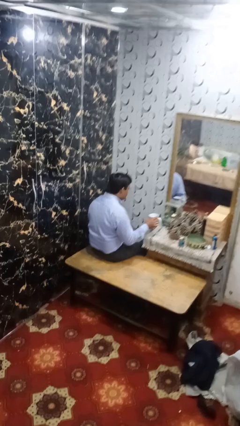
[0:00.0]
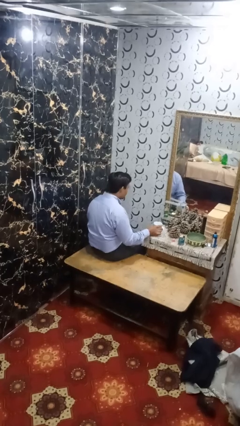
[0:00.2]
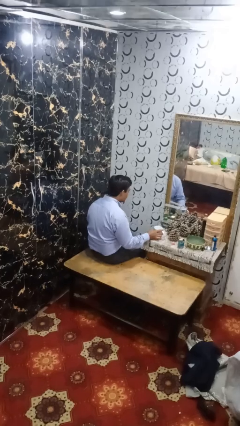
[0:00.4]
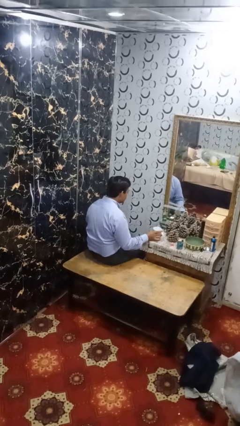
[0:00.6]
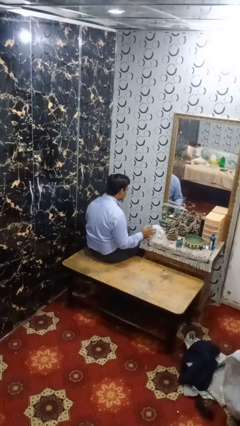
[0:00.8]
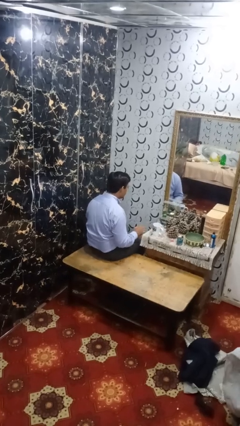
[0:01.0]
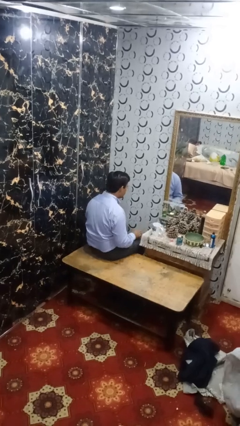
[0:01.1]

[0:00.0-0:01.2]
person puts down object on table

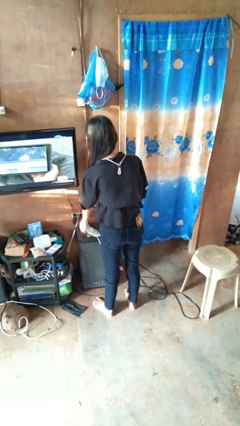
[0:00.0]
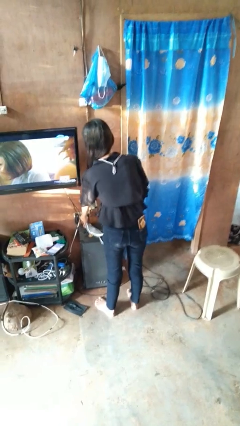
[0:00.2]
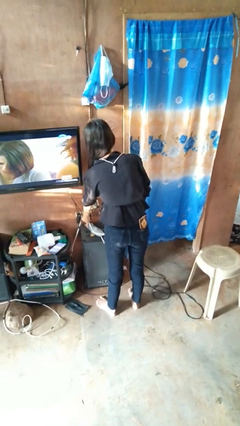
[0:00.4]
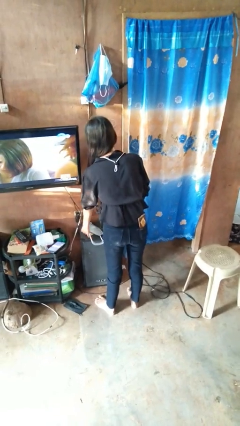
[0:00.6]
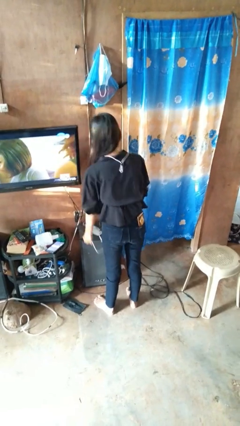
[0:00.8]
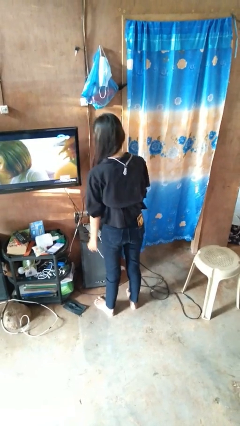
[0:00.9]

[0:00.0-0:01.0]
person unplugs from electrical socket

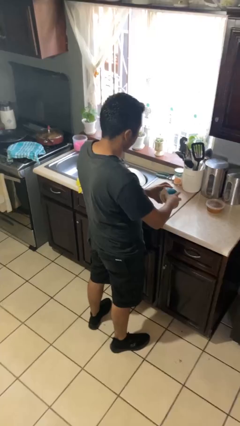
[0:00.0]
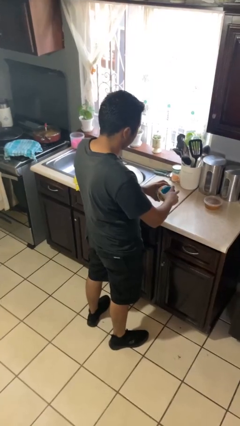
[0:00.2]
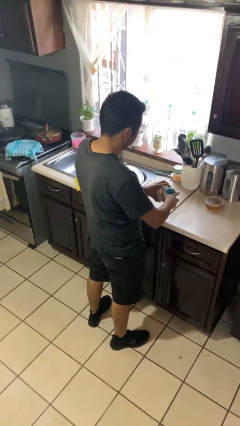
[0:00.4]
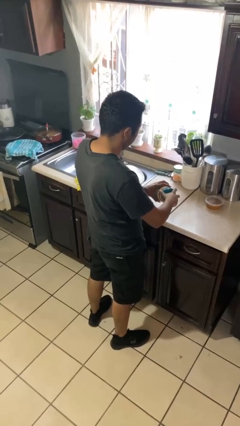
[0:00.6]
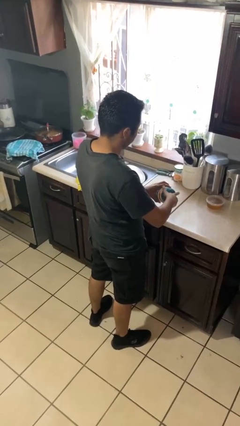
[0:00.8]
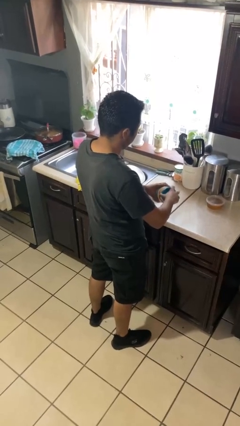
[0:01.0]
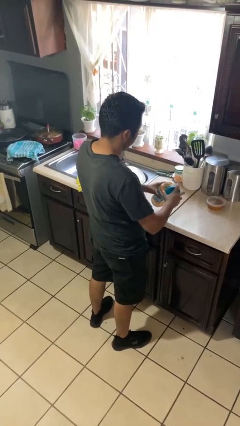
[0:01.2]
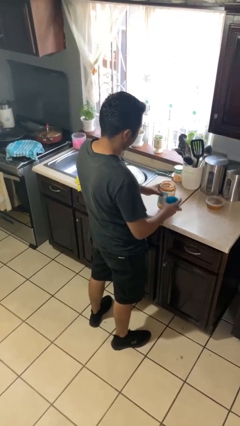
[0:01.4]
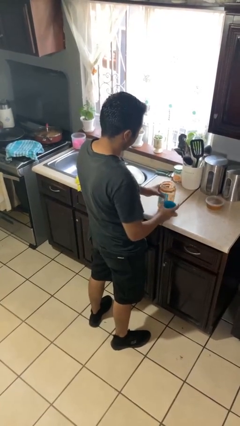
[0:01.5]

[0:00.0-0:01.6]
person opens jar

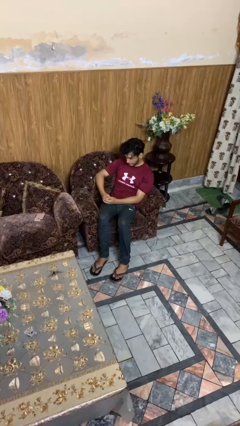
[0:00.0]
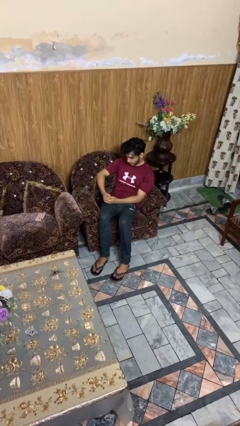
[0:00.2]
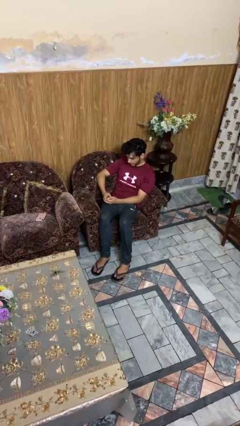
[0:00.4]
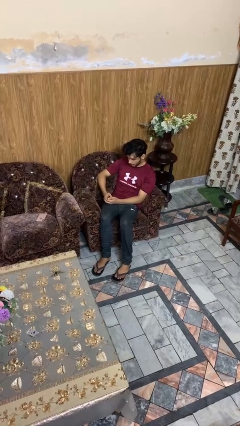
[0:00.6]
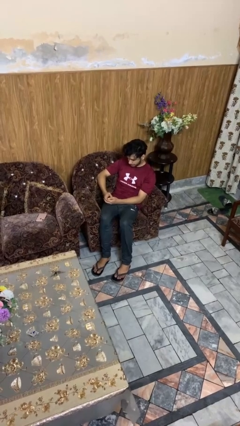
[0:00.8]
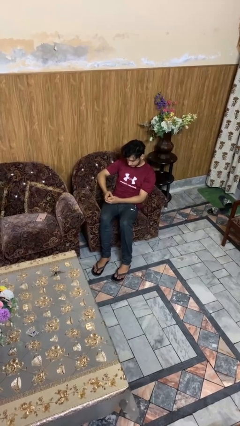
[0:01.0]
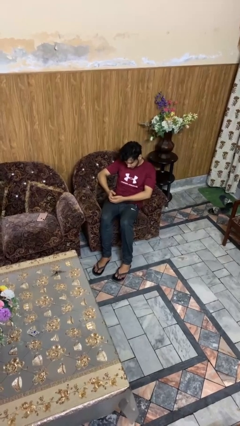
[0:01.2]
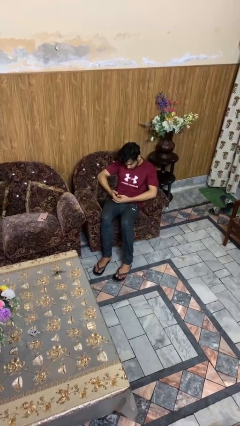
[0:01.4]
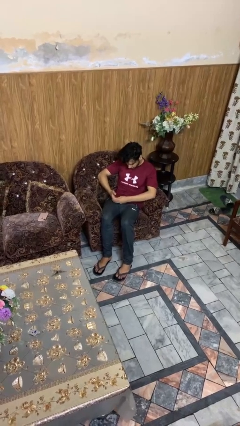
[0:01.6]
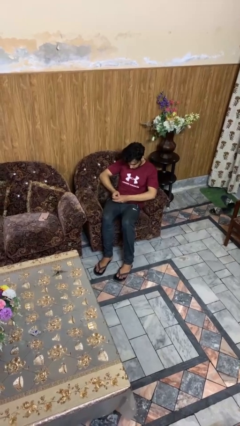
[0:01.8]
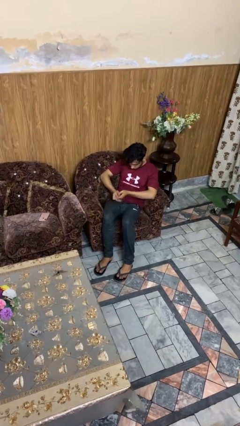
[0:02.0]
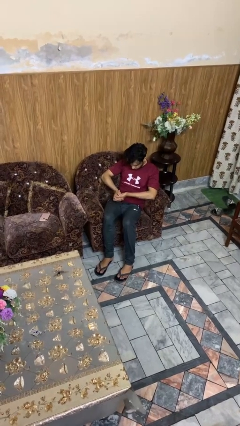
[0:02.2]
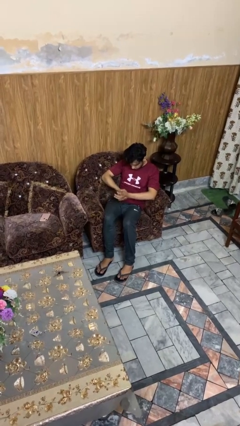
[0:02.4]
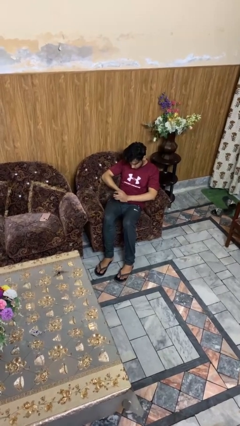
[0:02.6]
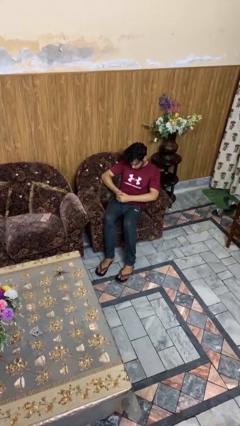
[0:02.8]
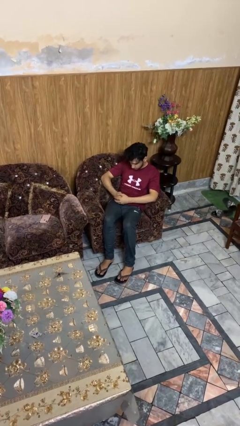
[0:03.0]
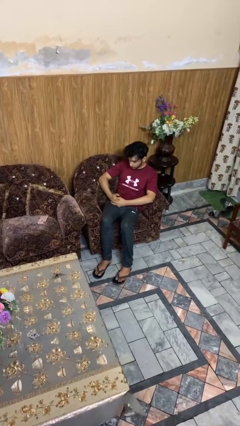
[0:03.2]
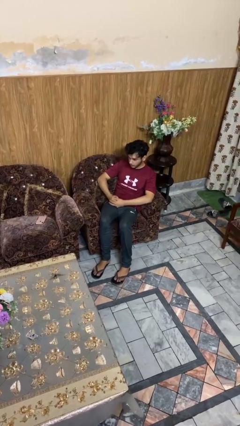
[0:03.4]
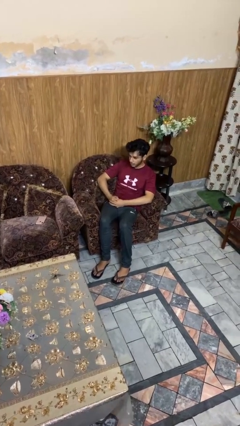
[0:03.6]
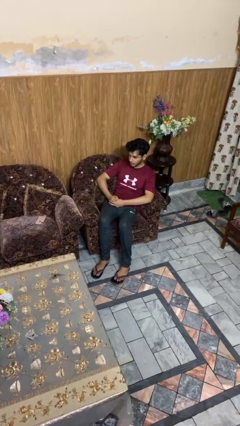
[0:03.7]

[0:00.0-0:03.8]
person looks at hands in lap

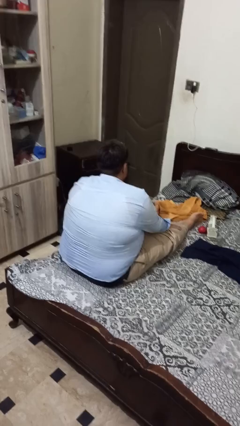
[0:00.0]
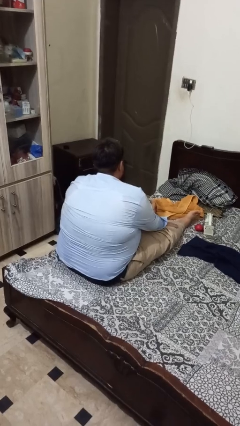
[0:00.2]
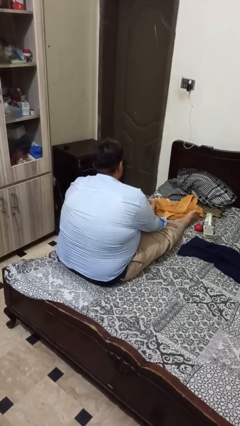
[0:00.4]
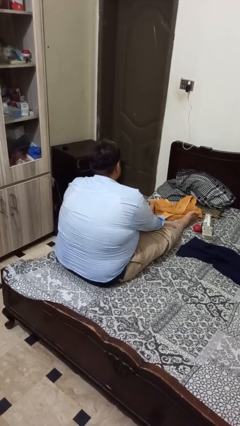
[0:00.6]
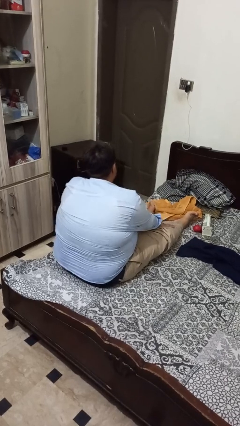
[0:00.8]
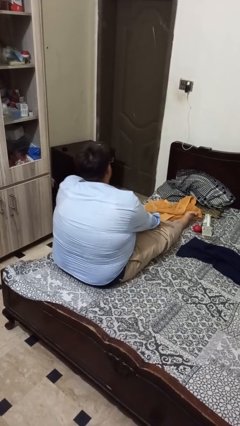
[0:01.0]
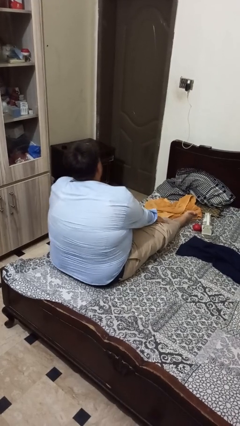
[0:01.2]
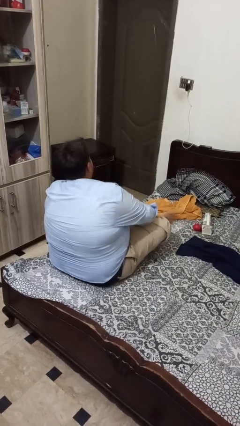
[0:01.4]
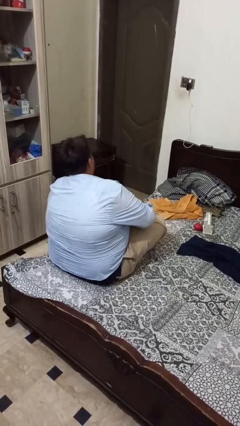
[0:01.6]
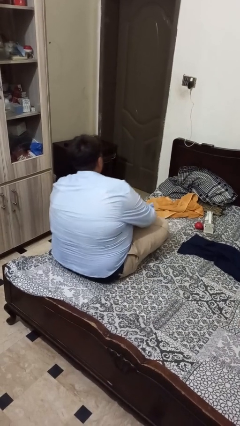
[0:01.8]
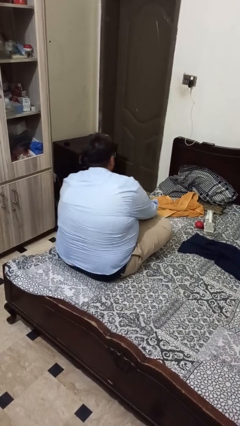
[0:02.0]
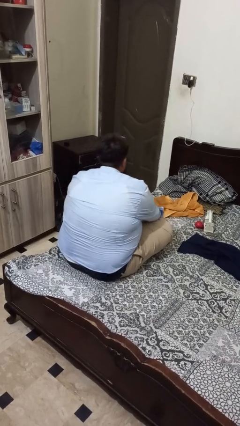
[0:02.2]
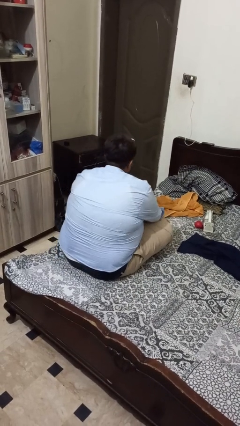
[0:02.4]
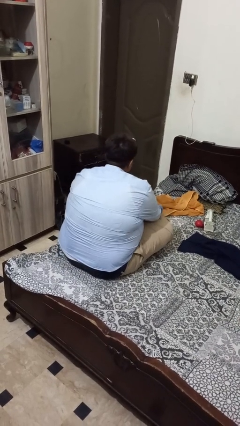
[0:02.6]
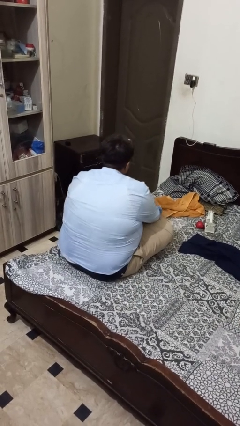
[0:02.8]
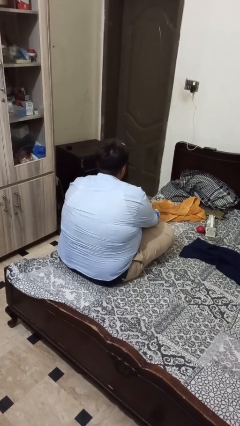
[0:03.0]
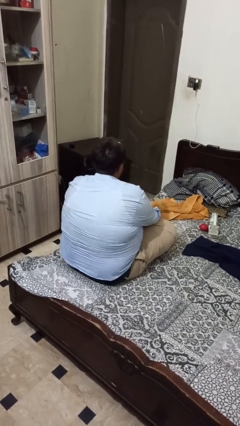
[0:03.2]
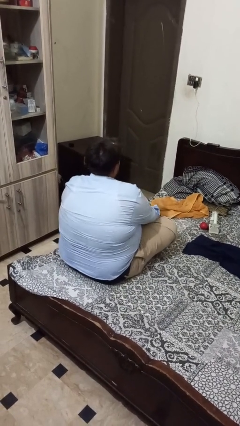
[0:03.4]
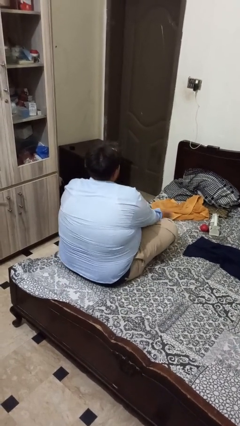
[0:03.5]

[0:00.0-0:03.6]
person crosses legs

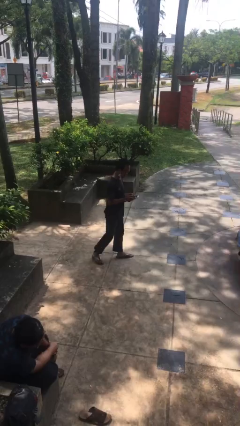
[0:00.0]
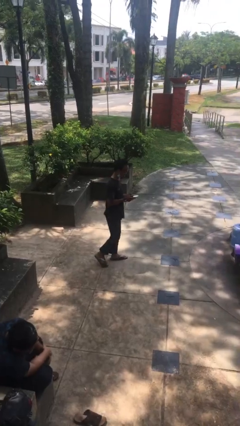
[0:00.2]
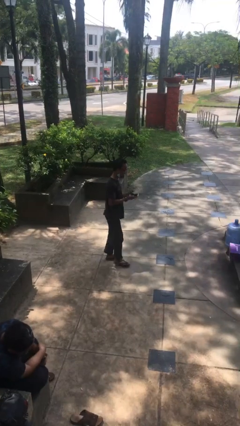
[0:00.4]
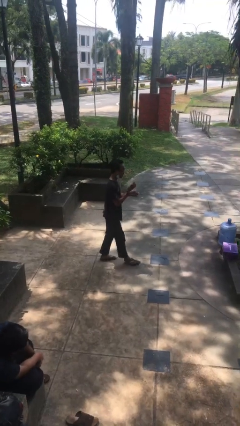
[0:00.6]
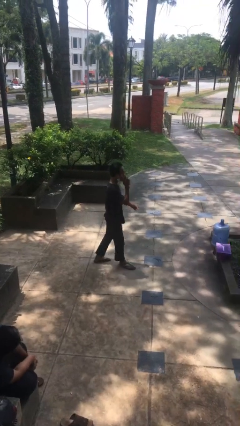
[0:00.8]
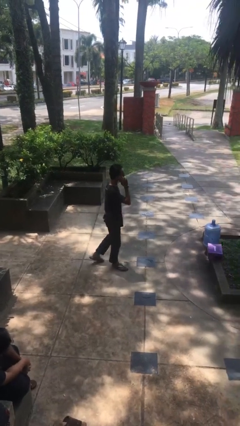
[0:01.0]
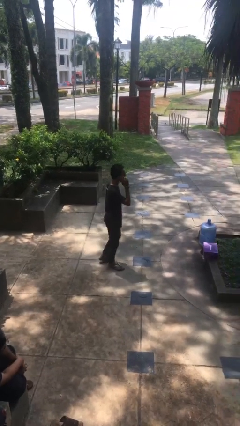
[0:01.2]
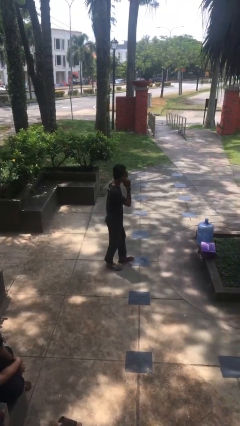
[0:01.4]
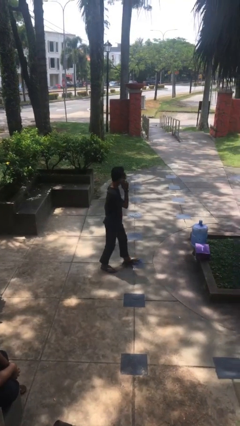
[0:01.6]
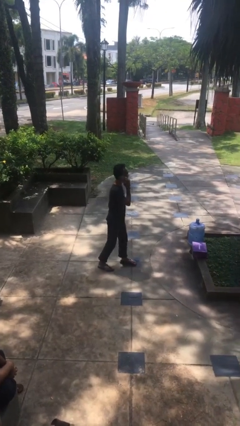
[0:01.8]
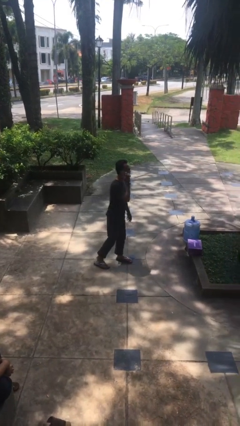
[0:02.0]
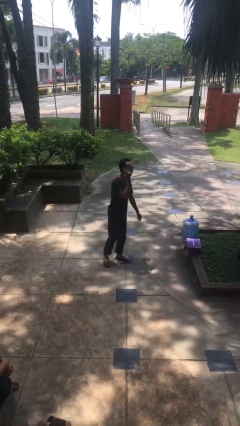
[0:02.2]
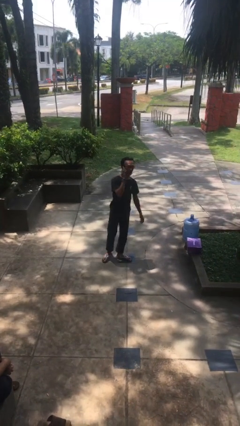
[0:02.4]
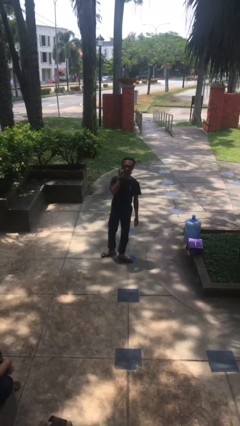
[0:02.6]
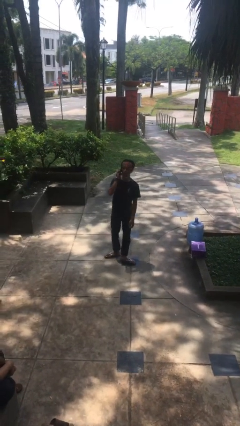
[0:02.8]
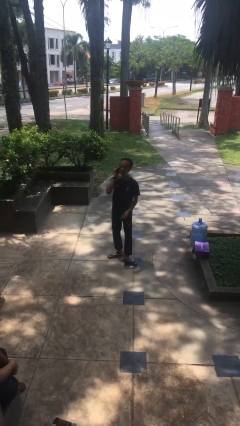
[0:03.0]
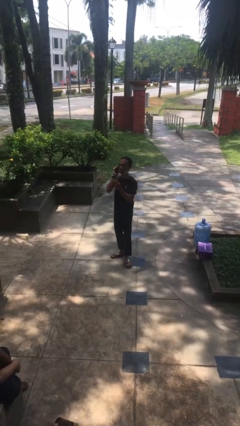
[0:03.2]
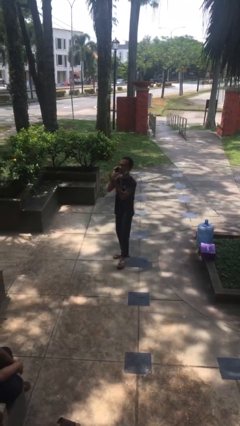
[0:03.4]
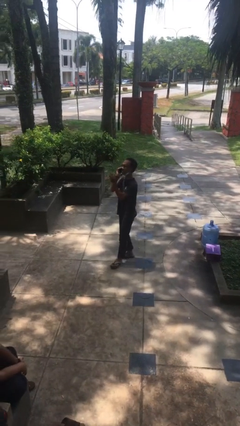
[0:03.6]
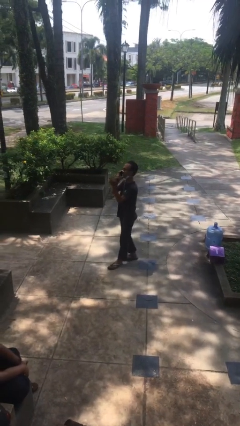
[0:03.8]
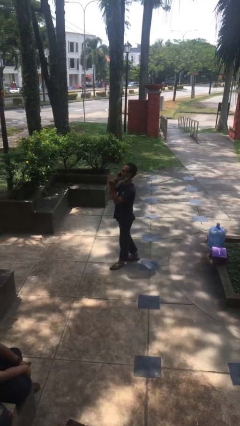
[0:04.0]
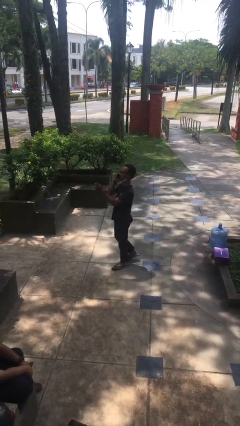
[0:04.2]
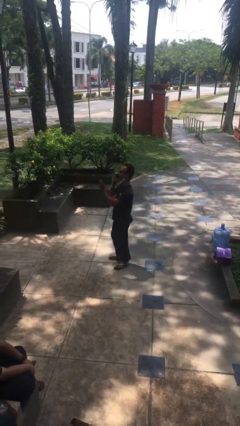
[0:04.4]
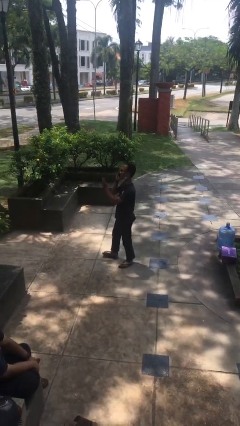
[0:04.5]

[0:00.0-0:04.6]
person talks on phone

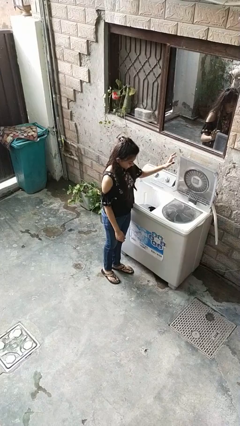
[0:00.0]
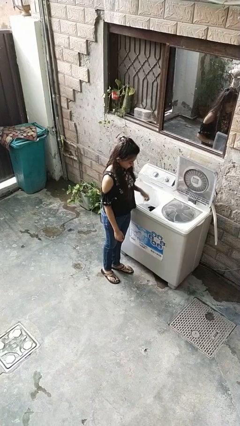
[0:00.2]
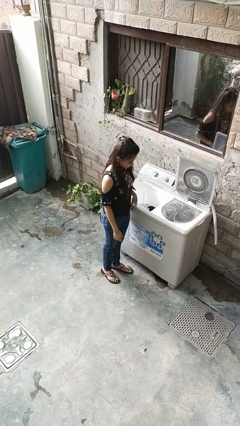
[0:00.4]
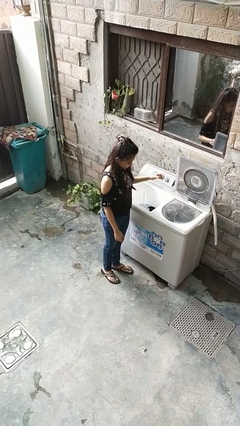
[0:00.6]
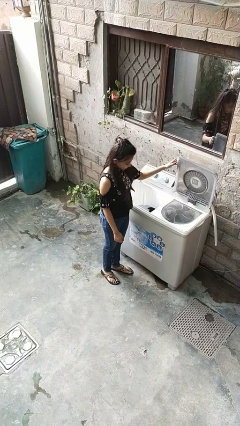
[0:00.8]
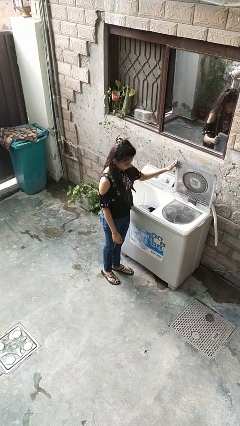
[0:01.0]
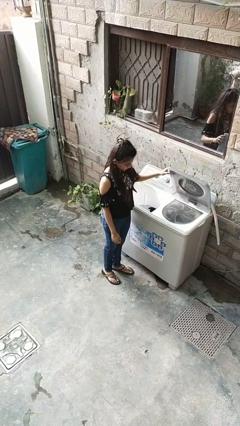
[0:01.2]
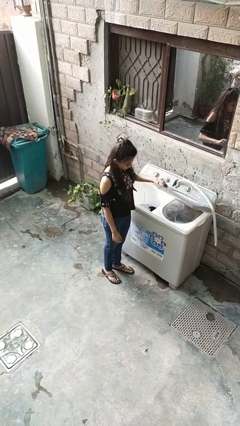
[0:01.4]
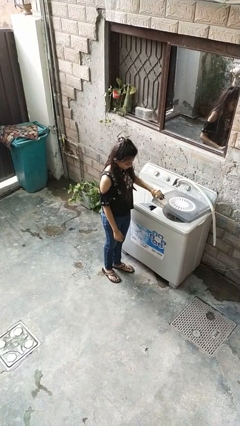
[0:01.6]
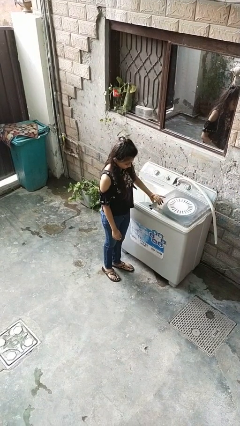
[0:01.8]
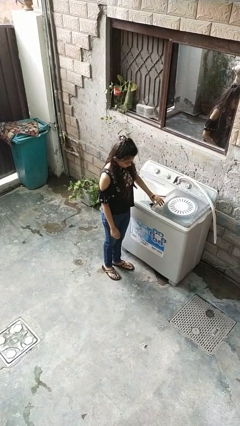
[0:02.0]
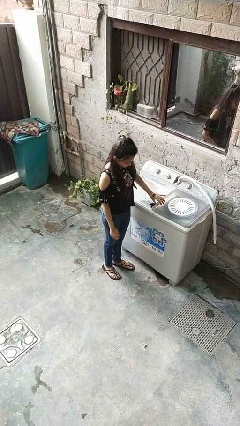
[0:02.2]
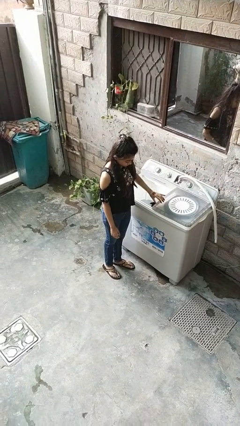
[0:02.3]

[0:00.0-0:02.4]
person closes clothes washer
